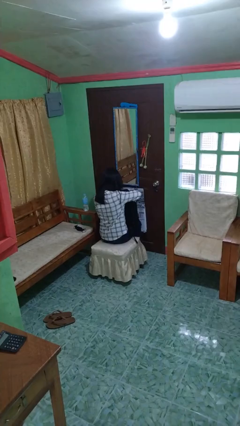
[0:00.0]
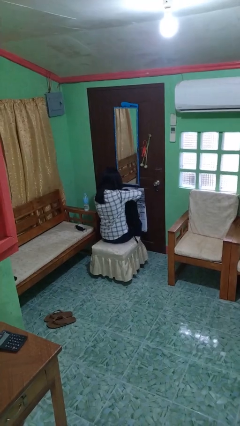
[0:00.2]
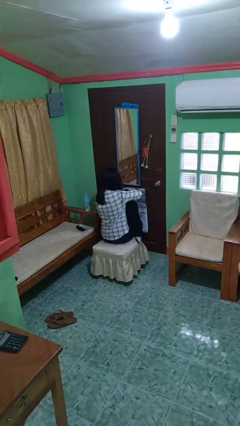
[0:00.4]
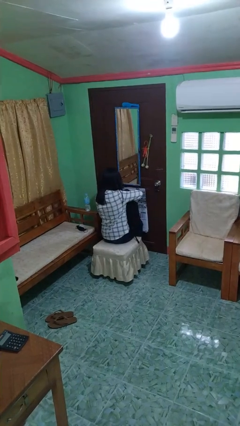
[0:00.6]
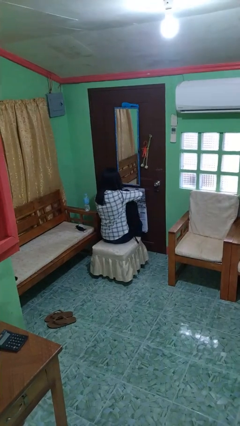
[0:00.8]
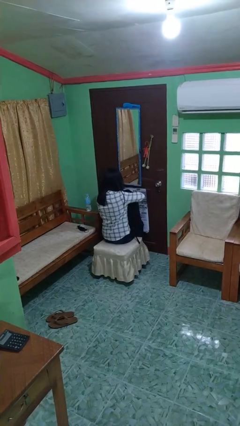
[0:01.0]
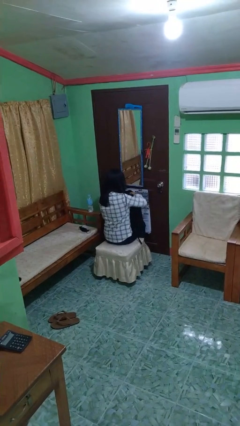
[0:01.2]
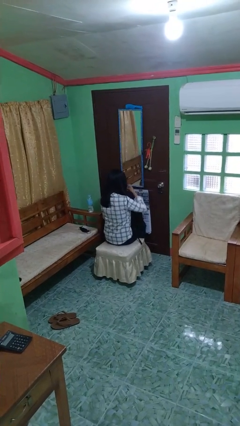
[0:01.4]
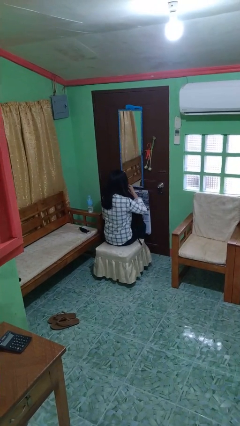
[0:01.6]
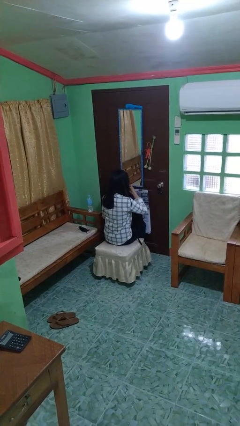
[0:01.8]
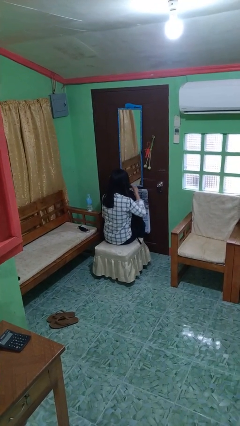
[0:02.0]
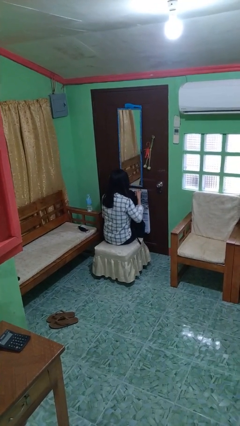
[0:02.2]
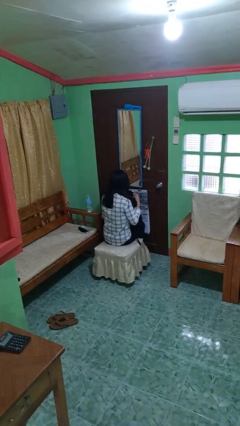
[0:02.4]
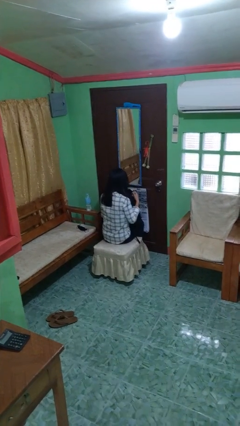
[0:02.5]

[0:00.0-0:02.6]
person eats snack from bag

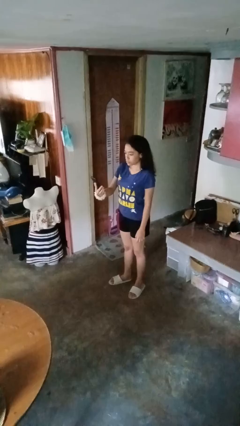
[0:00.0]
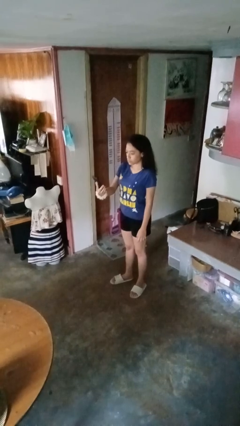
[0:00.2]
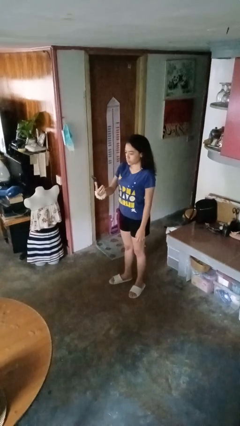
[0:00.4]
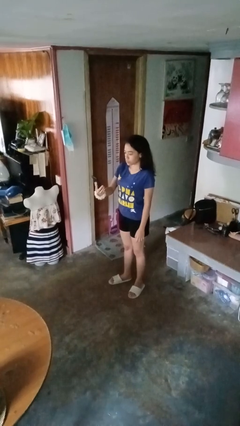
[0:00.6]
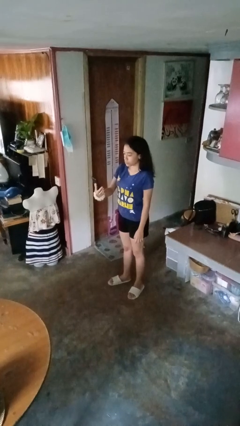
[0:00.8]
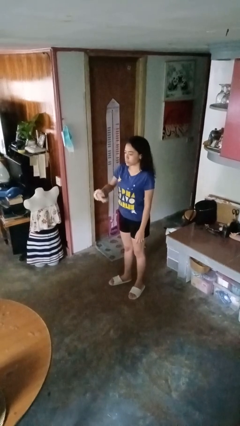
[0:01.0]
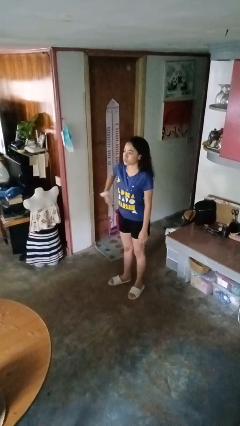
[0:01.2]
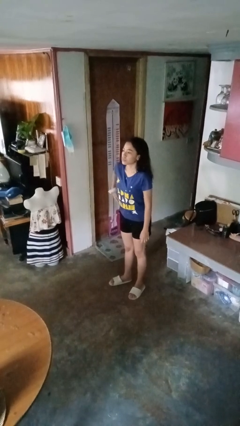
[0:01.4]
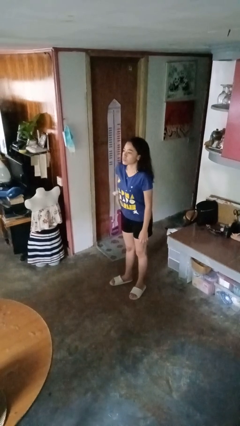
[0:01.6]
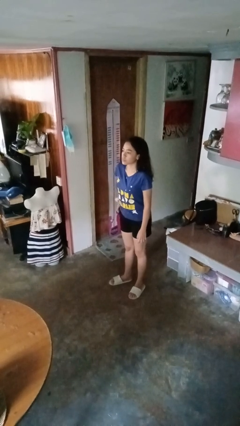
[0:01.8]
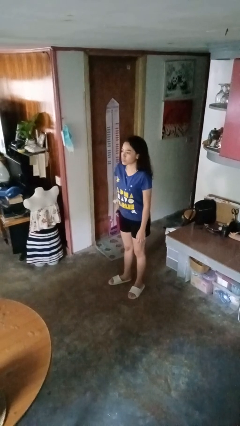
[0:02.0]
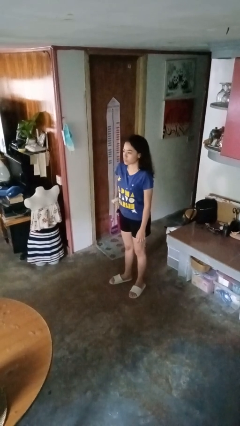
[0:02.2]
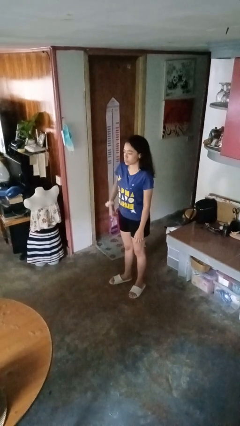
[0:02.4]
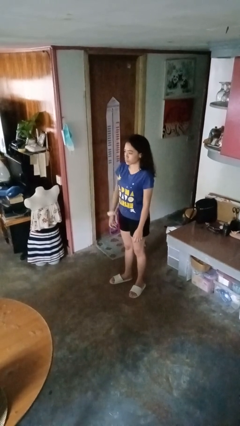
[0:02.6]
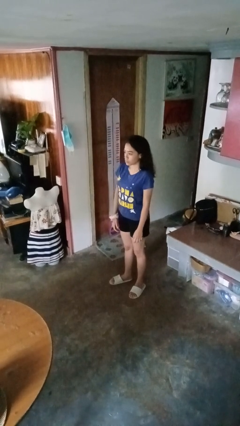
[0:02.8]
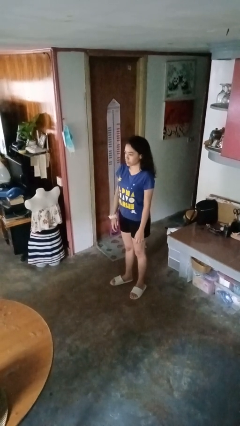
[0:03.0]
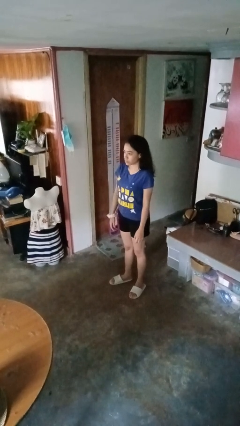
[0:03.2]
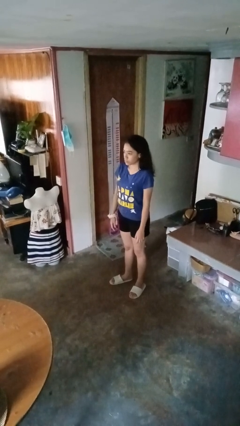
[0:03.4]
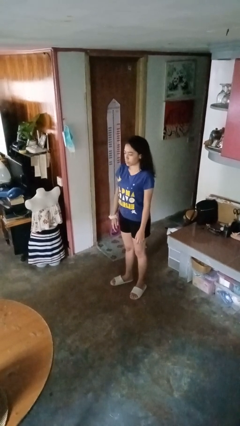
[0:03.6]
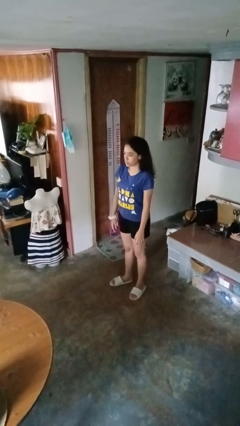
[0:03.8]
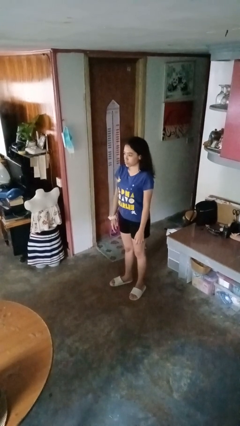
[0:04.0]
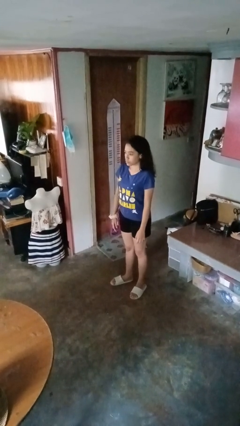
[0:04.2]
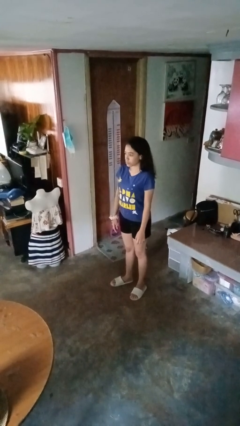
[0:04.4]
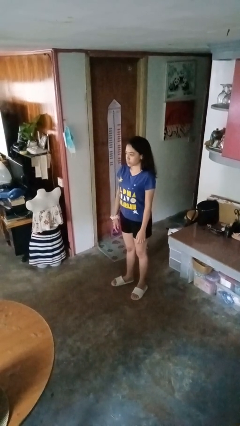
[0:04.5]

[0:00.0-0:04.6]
person puts phone into pocket

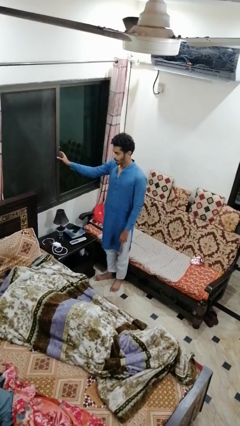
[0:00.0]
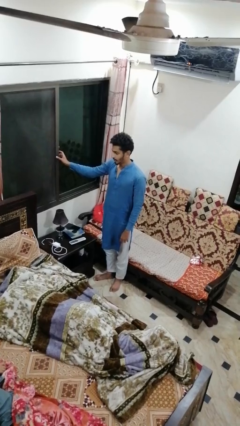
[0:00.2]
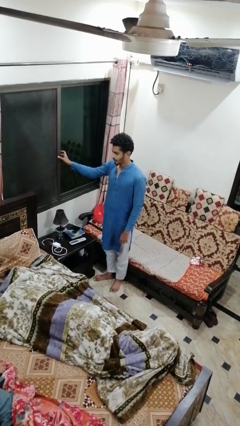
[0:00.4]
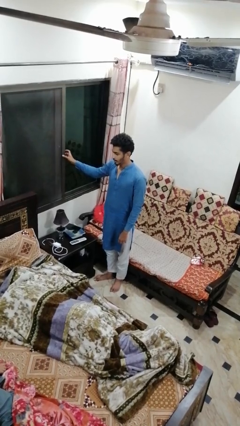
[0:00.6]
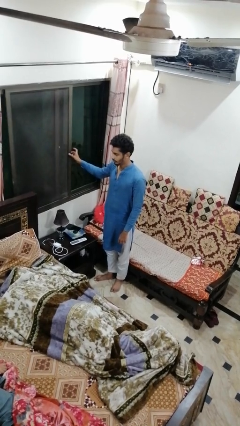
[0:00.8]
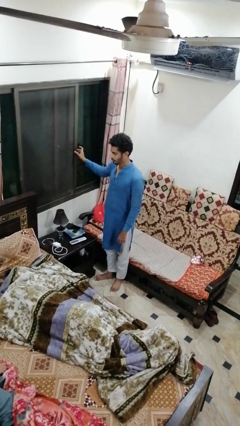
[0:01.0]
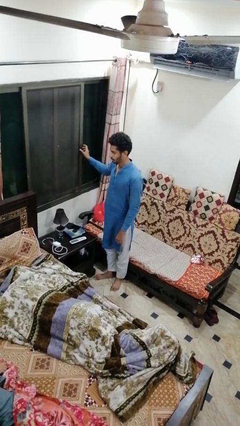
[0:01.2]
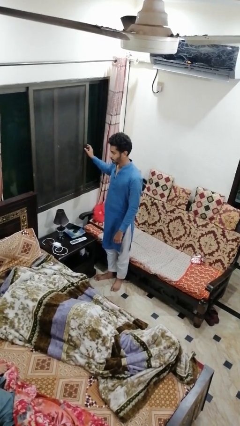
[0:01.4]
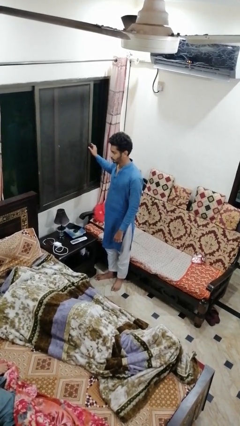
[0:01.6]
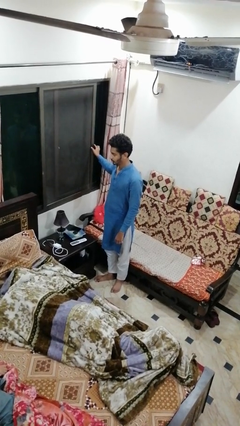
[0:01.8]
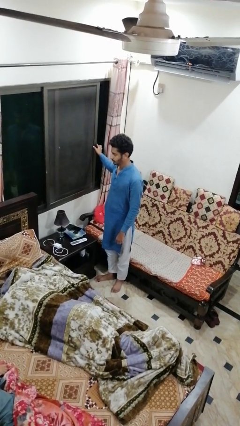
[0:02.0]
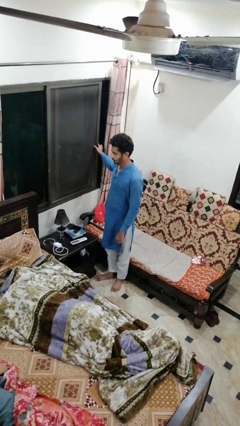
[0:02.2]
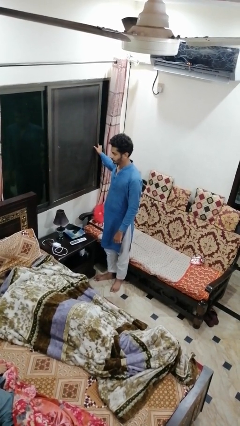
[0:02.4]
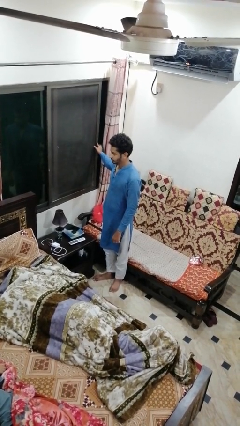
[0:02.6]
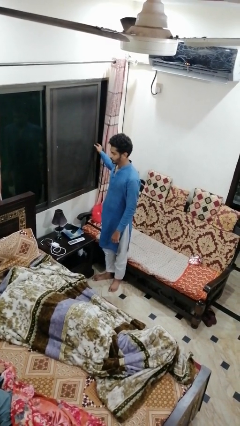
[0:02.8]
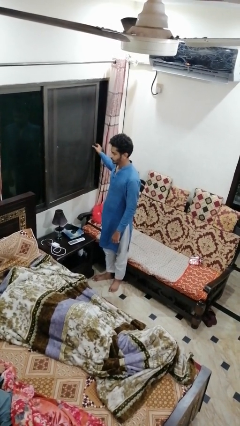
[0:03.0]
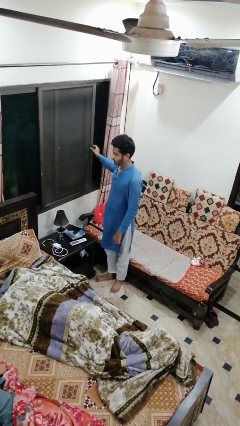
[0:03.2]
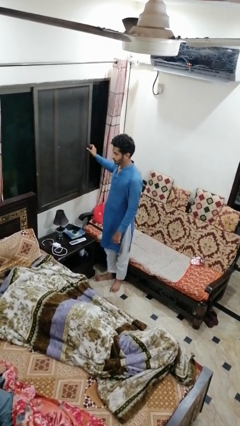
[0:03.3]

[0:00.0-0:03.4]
person opens home window

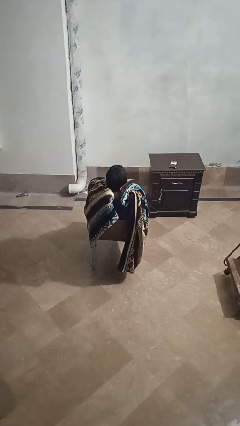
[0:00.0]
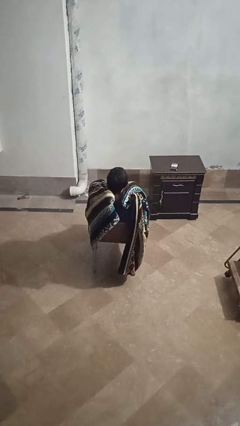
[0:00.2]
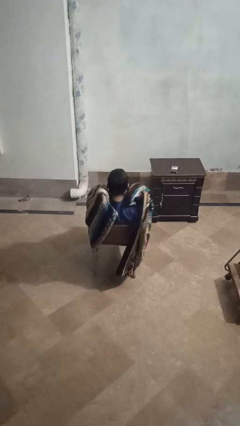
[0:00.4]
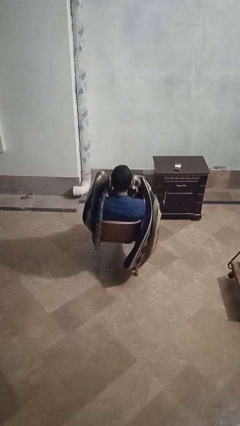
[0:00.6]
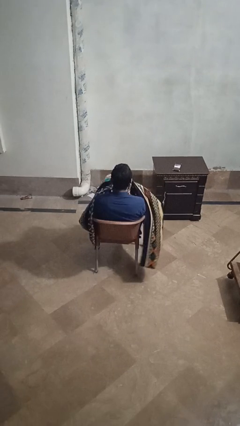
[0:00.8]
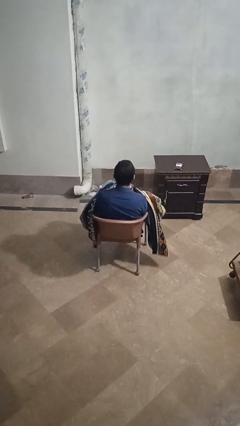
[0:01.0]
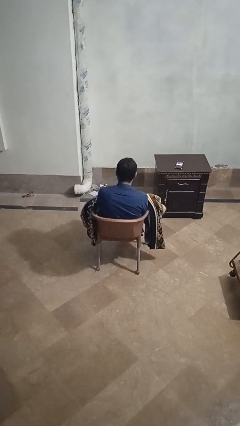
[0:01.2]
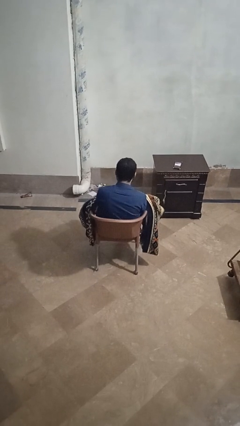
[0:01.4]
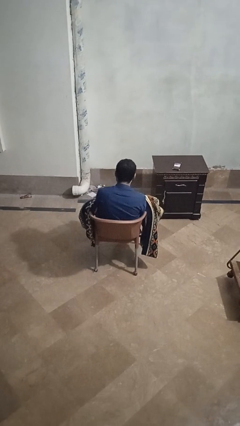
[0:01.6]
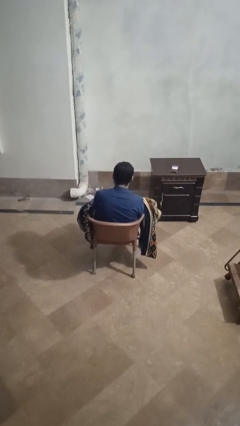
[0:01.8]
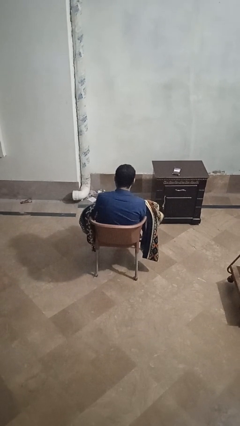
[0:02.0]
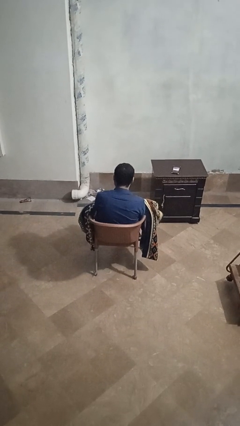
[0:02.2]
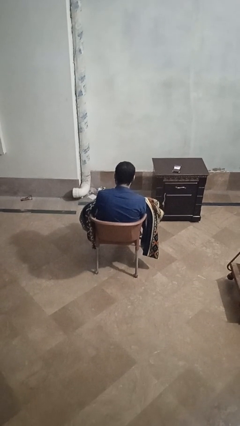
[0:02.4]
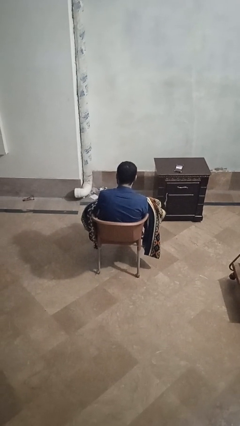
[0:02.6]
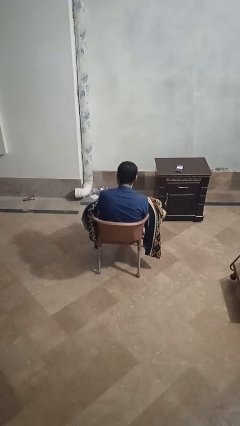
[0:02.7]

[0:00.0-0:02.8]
person uncovers with blanket

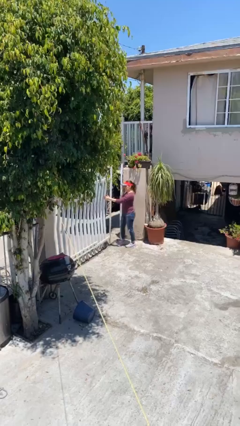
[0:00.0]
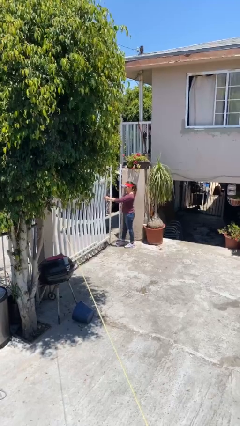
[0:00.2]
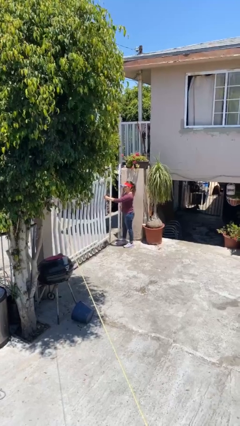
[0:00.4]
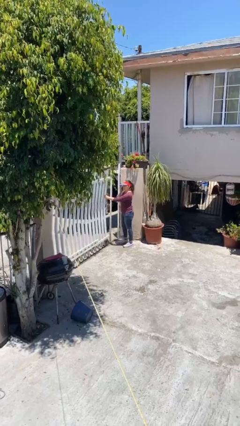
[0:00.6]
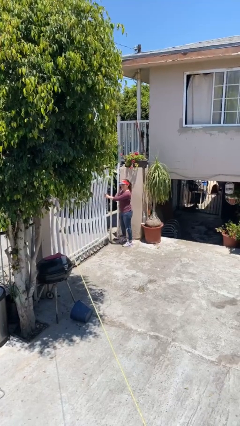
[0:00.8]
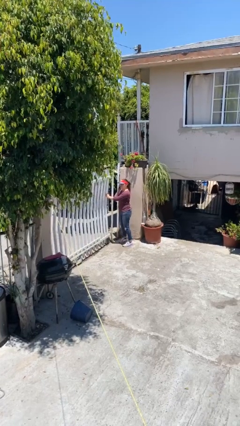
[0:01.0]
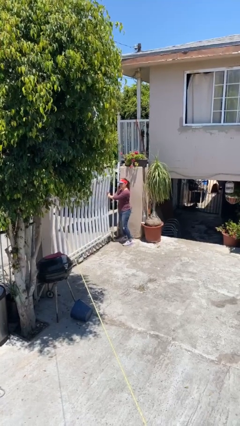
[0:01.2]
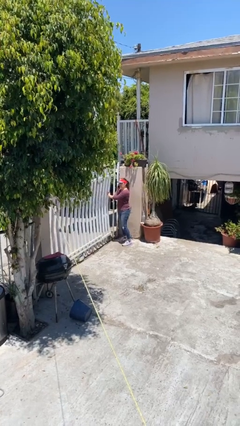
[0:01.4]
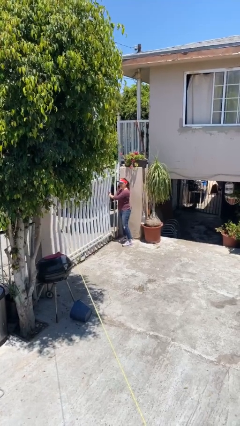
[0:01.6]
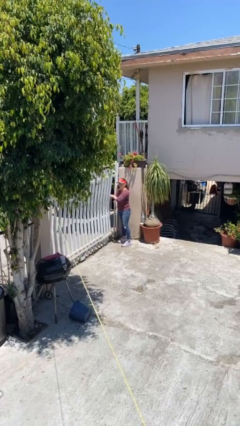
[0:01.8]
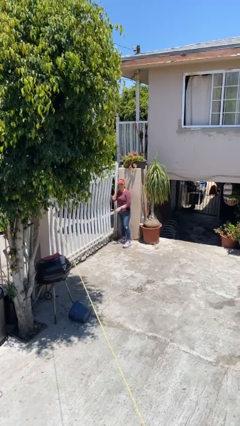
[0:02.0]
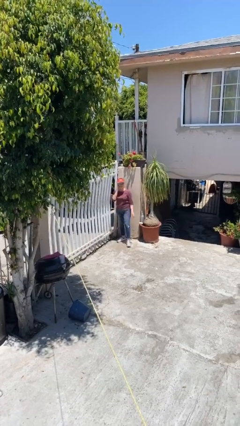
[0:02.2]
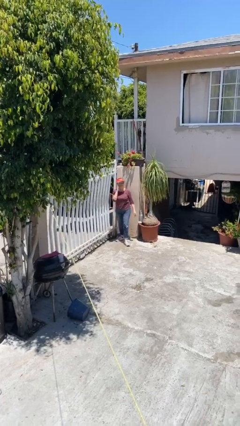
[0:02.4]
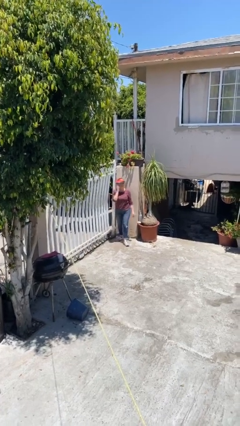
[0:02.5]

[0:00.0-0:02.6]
person closes facility door

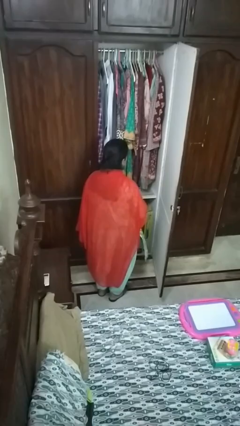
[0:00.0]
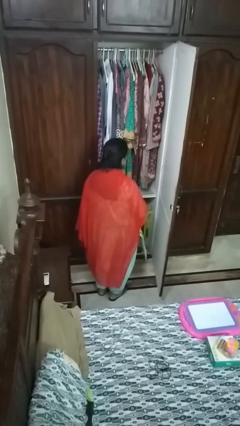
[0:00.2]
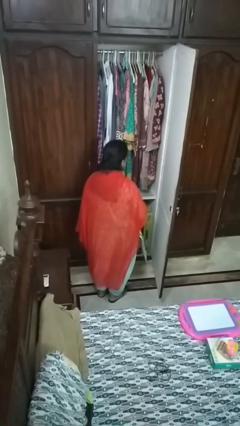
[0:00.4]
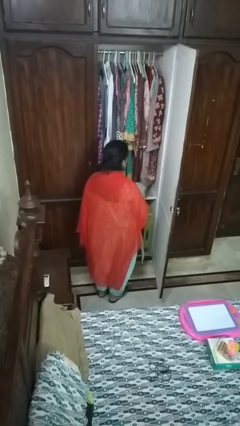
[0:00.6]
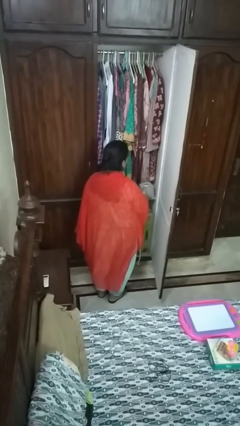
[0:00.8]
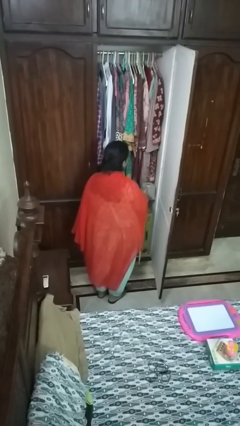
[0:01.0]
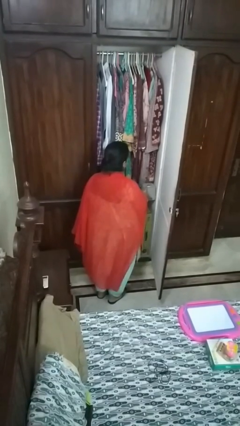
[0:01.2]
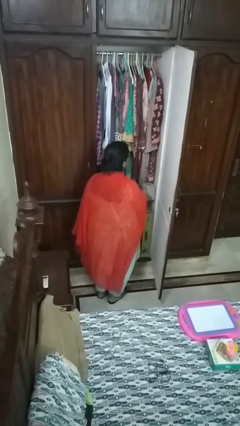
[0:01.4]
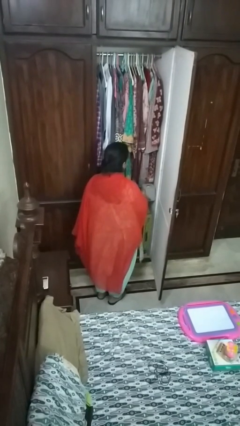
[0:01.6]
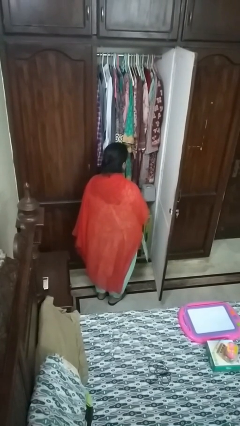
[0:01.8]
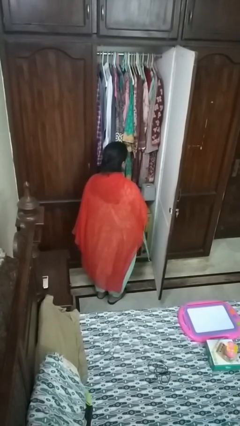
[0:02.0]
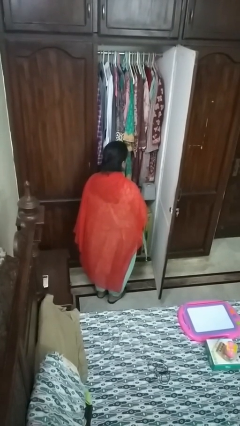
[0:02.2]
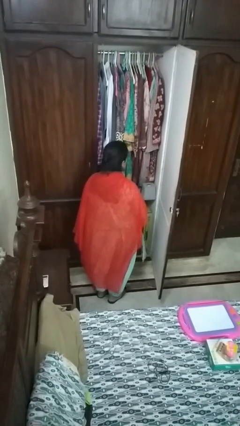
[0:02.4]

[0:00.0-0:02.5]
person puts down object into cabinet
